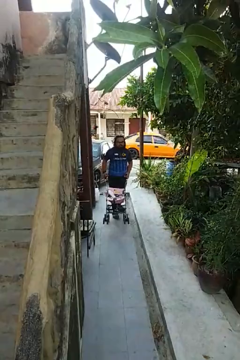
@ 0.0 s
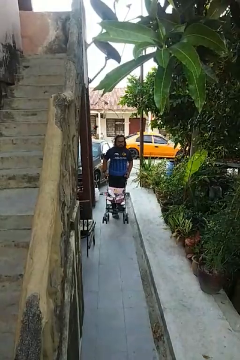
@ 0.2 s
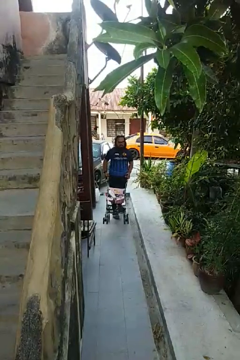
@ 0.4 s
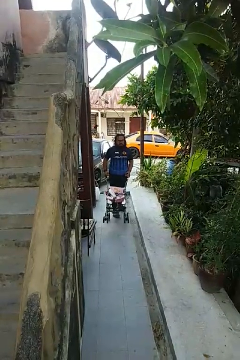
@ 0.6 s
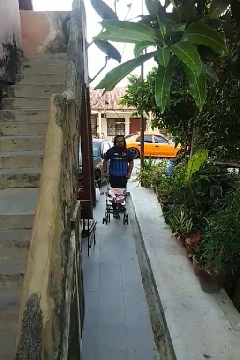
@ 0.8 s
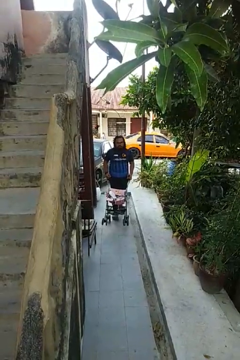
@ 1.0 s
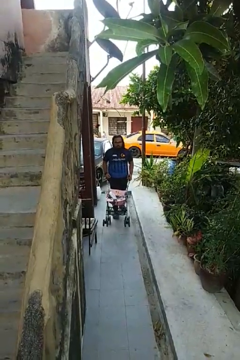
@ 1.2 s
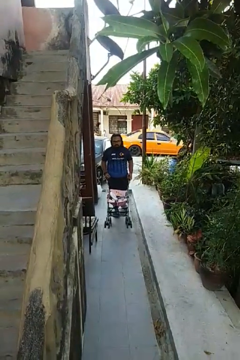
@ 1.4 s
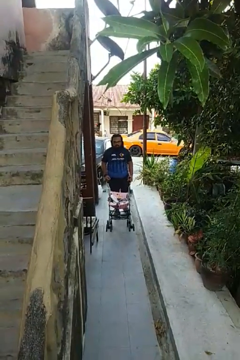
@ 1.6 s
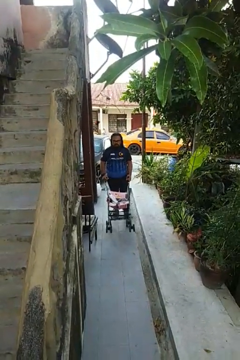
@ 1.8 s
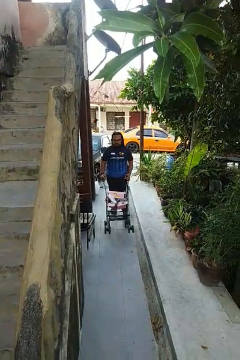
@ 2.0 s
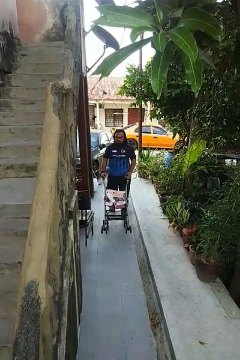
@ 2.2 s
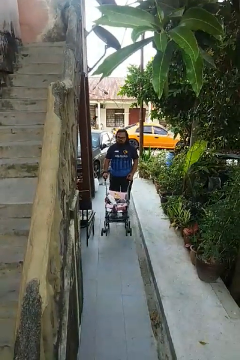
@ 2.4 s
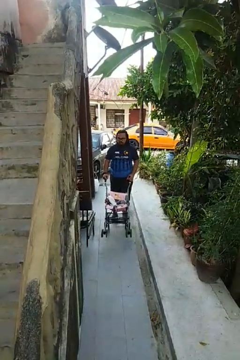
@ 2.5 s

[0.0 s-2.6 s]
person pushes wheeled cart

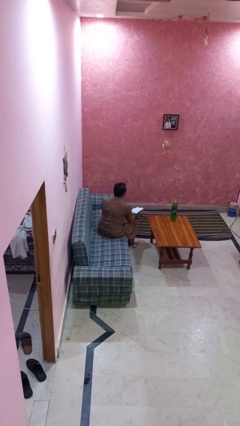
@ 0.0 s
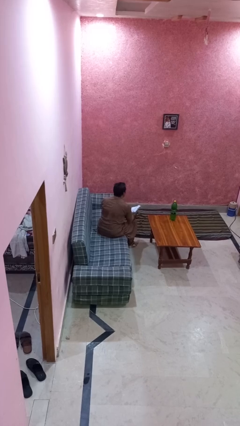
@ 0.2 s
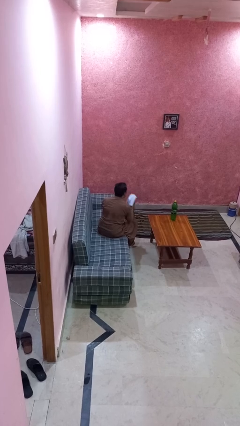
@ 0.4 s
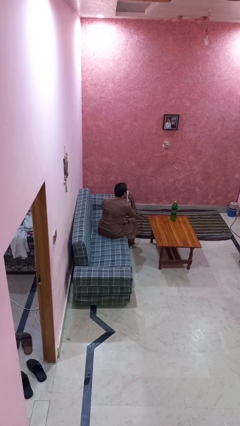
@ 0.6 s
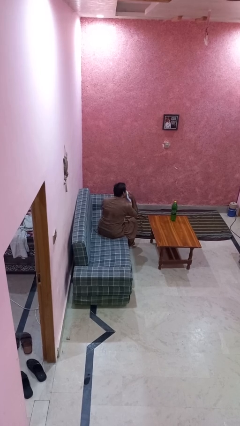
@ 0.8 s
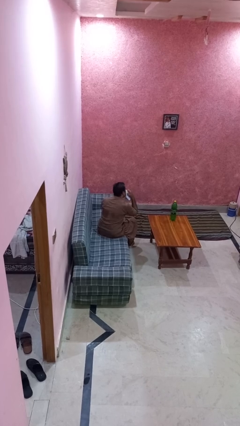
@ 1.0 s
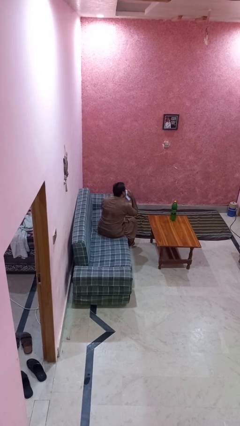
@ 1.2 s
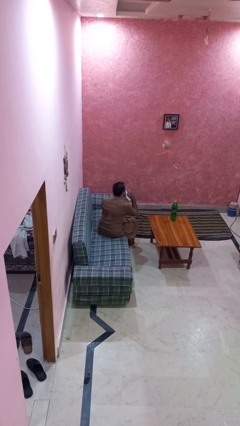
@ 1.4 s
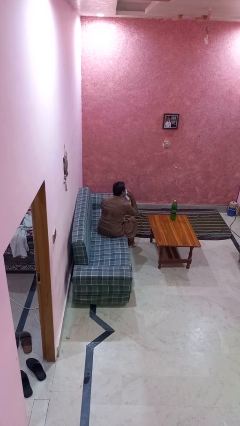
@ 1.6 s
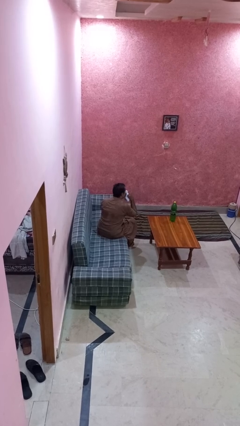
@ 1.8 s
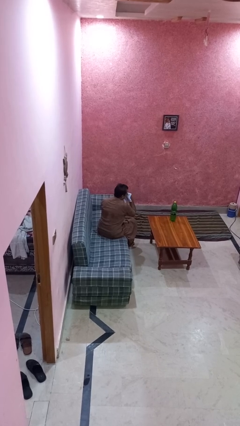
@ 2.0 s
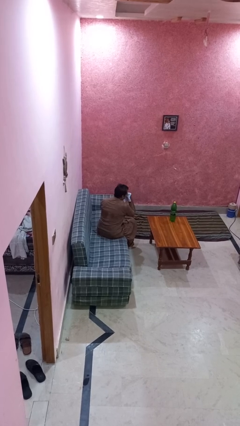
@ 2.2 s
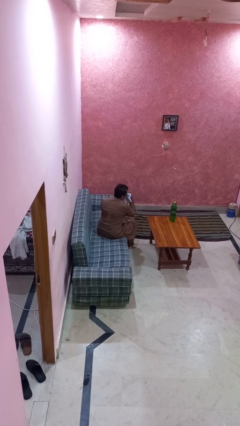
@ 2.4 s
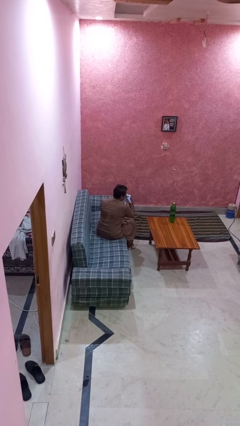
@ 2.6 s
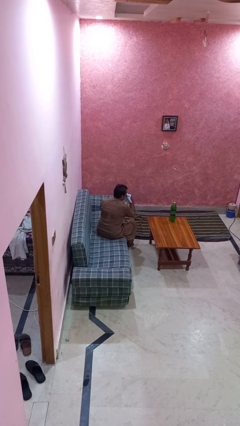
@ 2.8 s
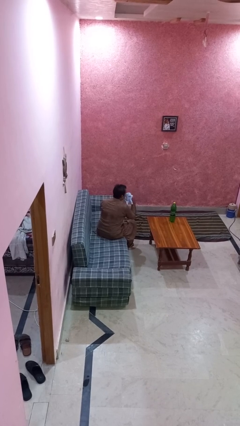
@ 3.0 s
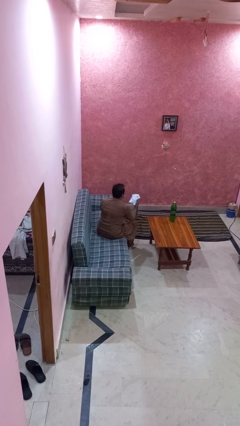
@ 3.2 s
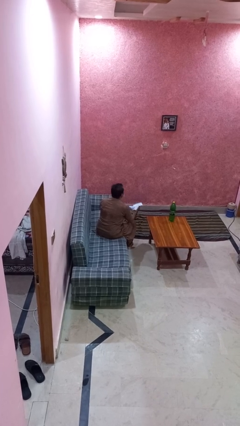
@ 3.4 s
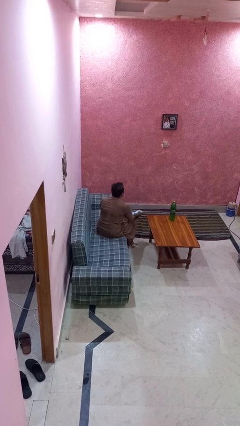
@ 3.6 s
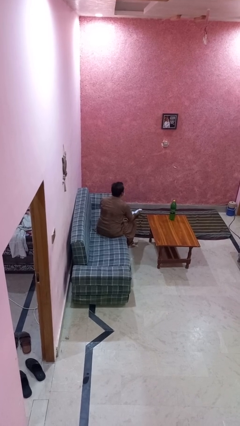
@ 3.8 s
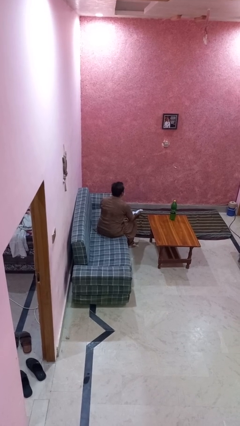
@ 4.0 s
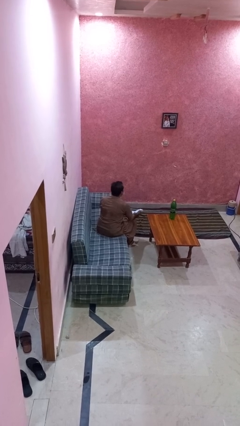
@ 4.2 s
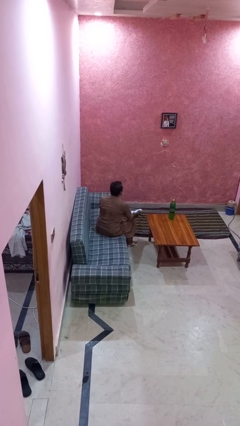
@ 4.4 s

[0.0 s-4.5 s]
person blows nose

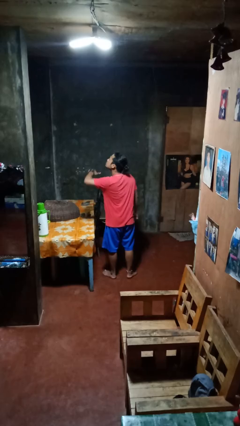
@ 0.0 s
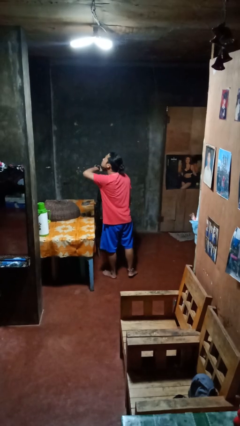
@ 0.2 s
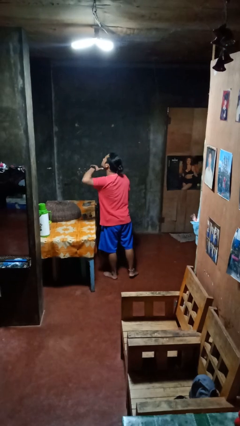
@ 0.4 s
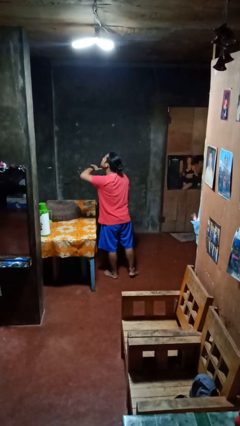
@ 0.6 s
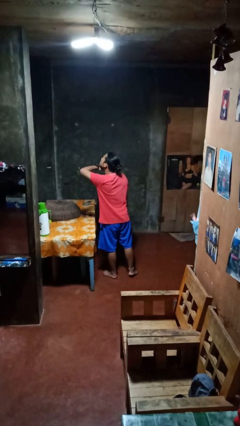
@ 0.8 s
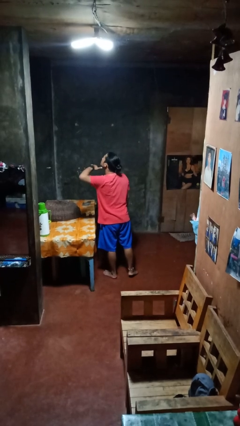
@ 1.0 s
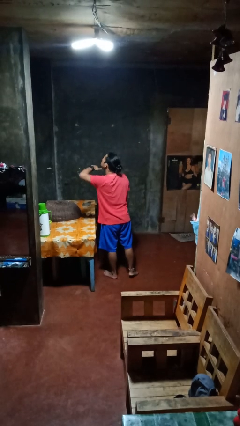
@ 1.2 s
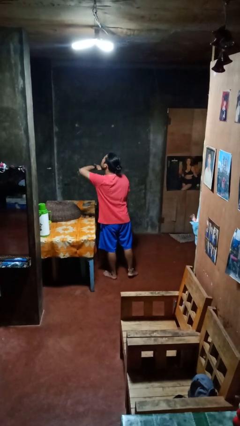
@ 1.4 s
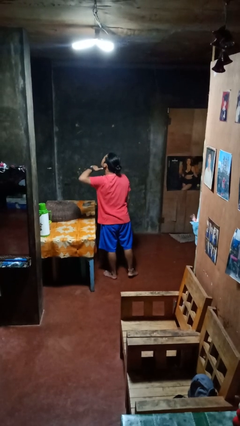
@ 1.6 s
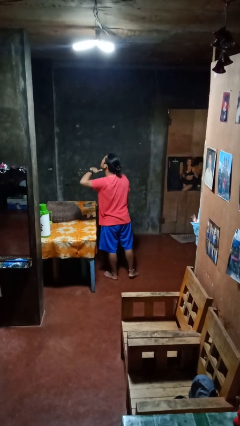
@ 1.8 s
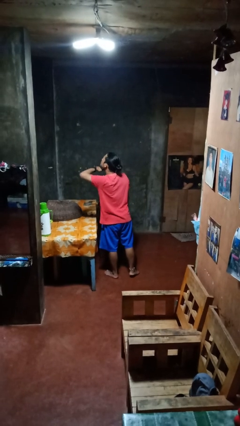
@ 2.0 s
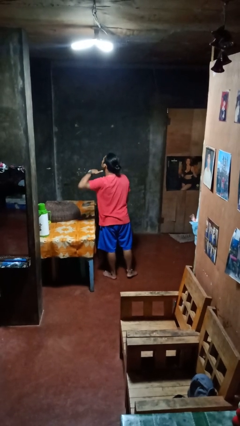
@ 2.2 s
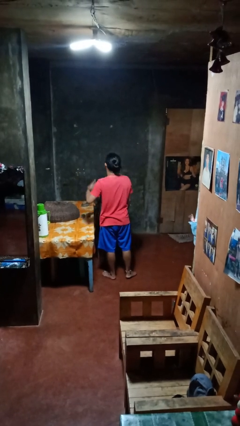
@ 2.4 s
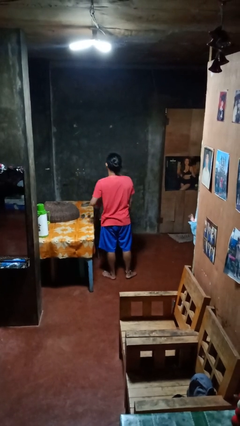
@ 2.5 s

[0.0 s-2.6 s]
person gestures cut

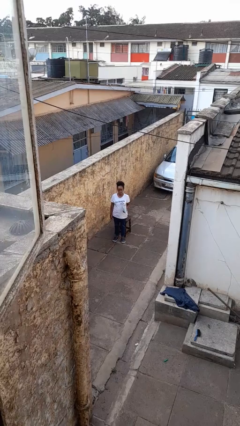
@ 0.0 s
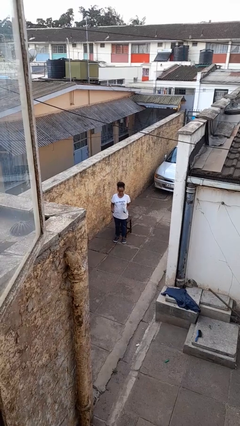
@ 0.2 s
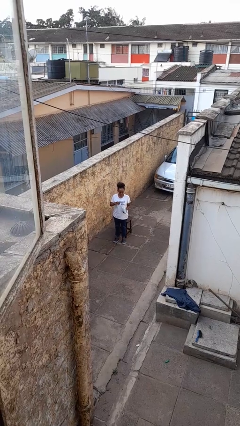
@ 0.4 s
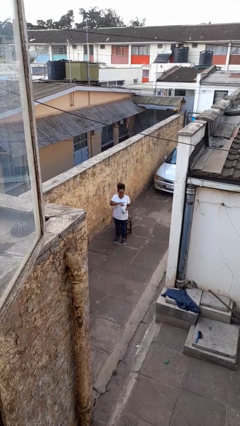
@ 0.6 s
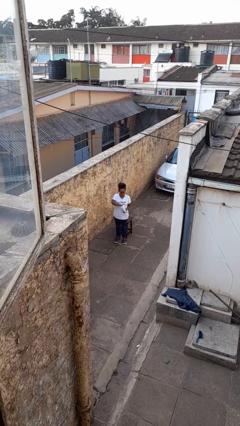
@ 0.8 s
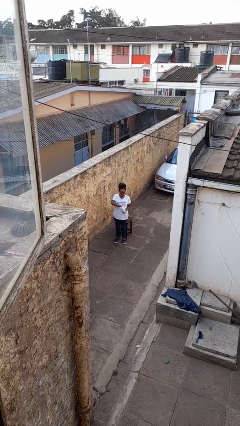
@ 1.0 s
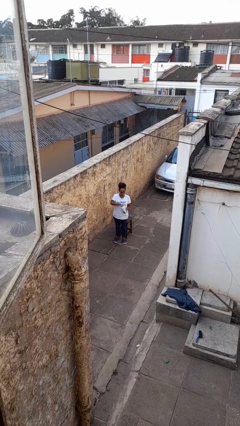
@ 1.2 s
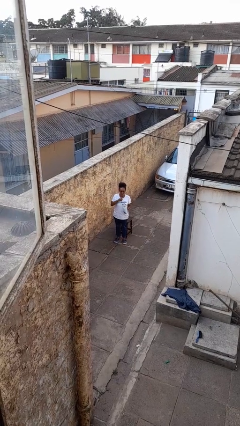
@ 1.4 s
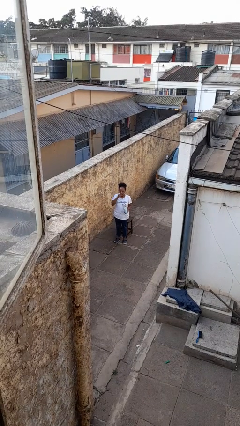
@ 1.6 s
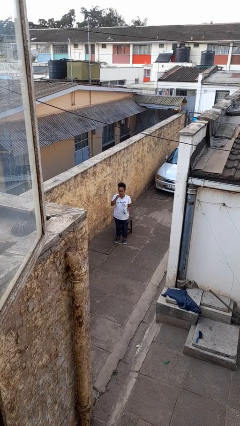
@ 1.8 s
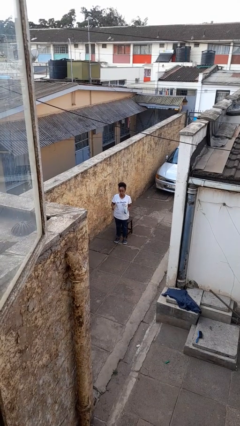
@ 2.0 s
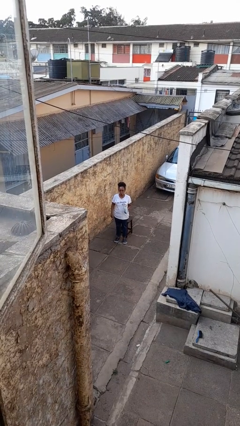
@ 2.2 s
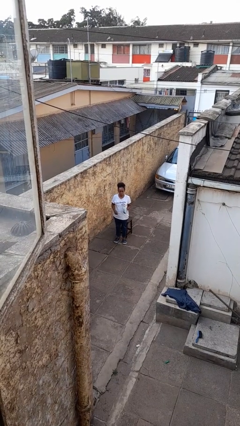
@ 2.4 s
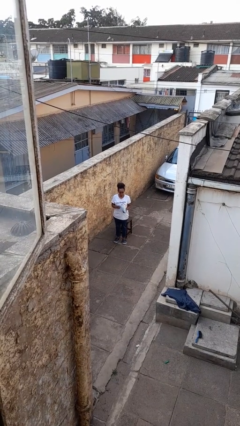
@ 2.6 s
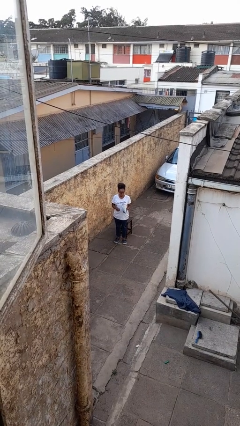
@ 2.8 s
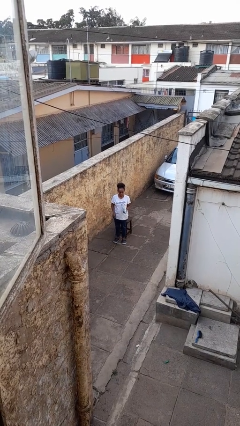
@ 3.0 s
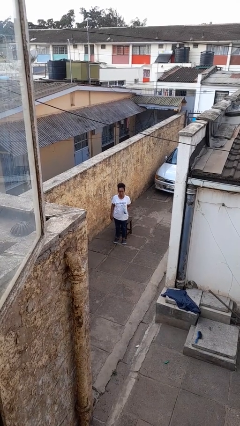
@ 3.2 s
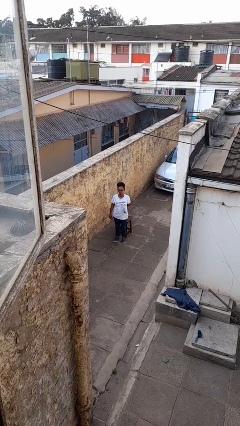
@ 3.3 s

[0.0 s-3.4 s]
person eats snack from bag

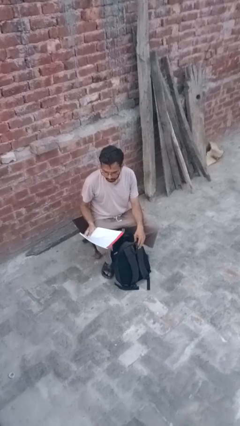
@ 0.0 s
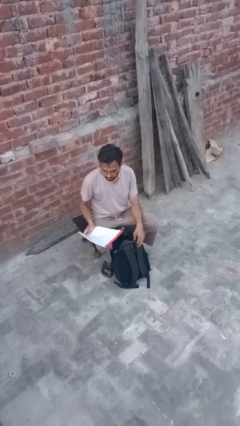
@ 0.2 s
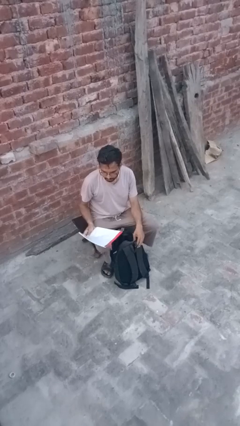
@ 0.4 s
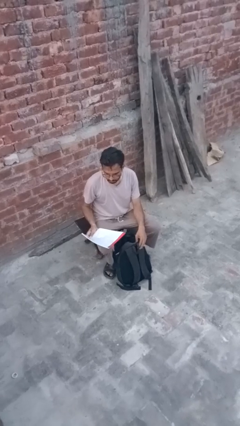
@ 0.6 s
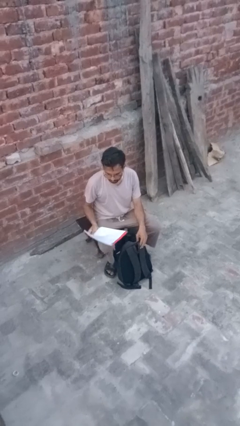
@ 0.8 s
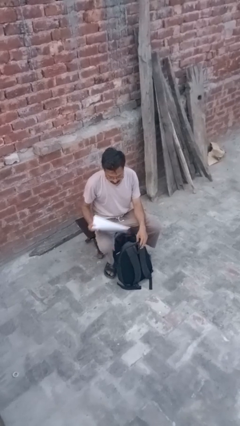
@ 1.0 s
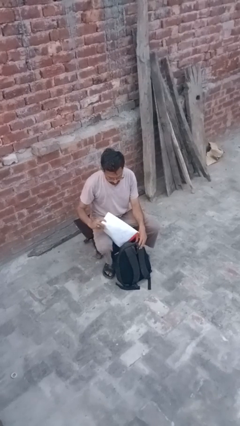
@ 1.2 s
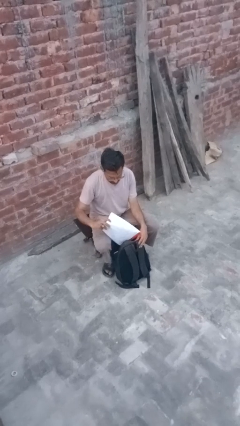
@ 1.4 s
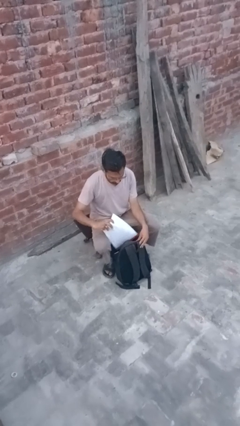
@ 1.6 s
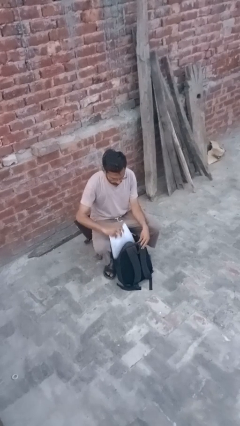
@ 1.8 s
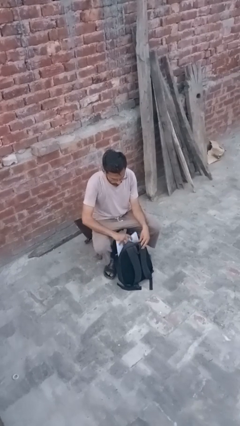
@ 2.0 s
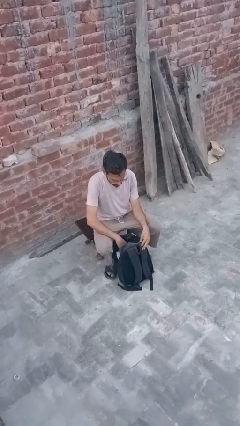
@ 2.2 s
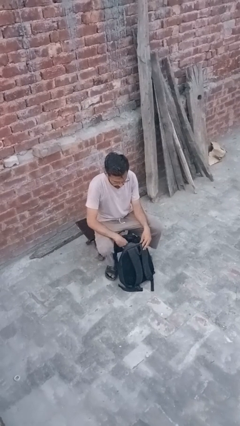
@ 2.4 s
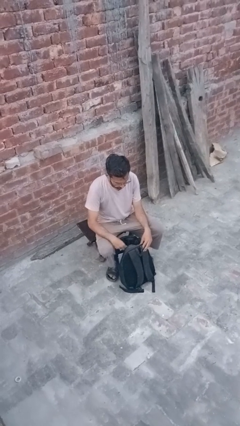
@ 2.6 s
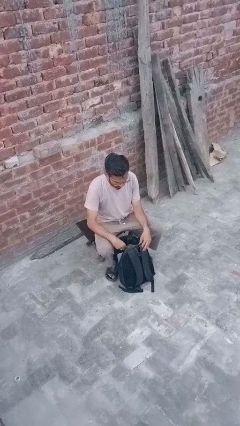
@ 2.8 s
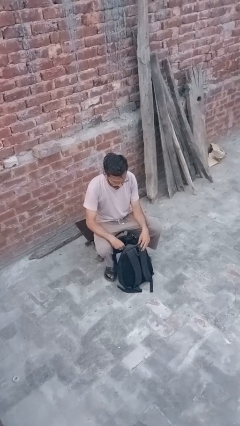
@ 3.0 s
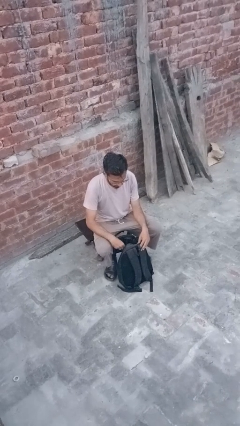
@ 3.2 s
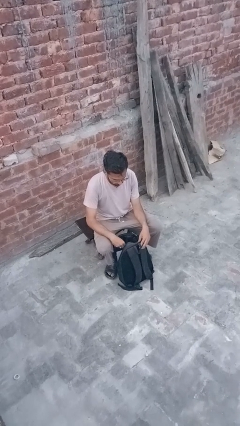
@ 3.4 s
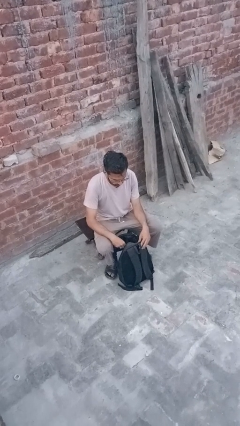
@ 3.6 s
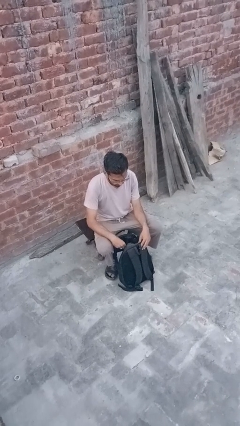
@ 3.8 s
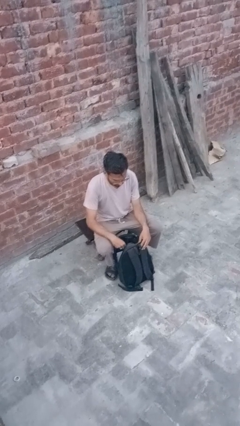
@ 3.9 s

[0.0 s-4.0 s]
person puts object into backpack

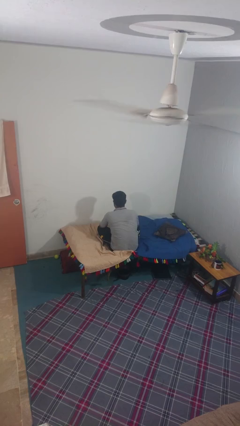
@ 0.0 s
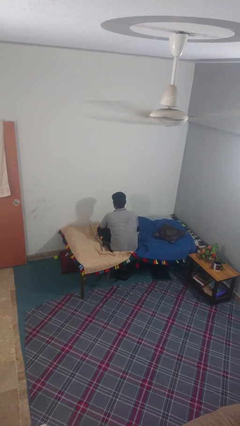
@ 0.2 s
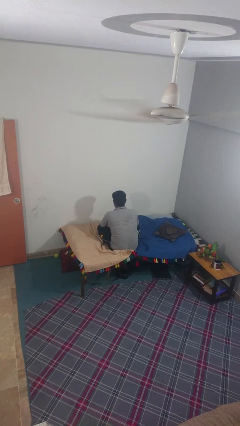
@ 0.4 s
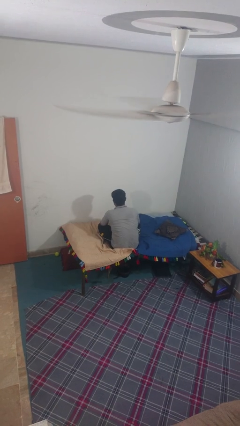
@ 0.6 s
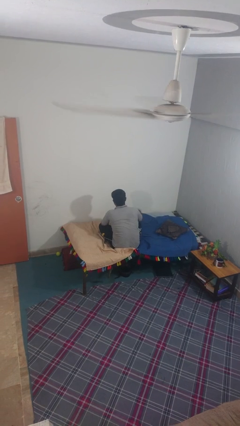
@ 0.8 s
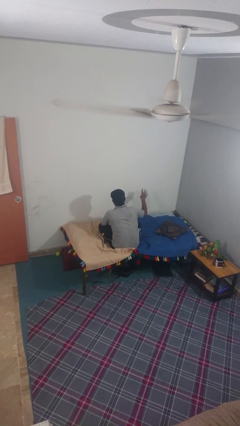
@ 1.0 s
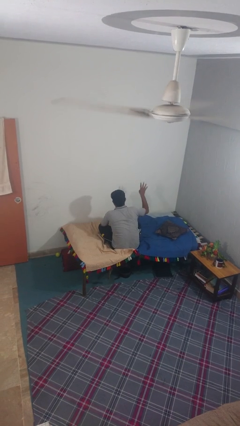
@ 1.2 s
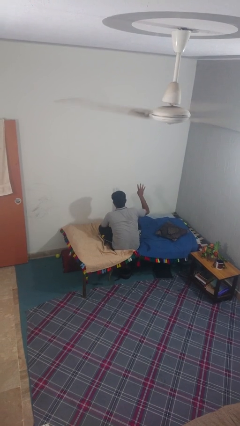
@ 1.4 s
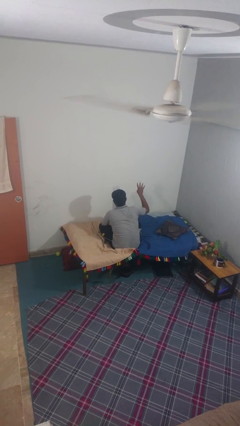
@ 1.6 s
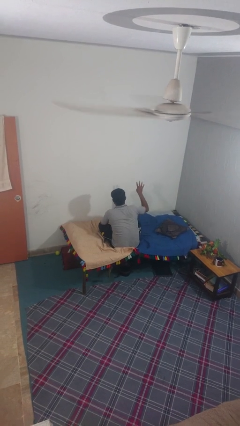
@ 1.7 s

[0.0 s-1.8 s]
person gestures number four
